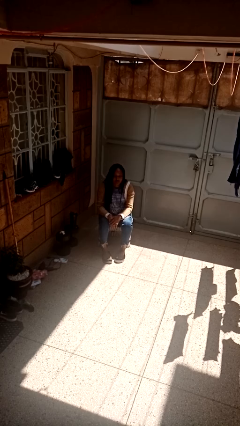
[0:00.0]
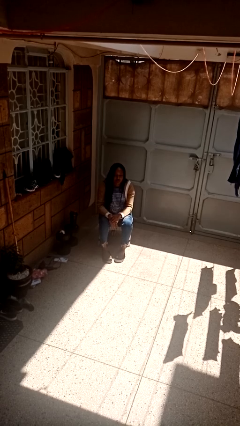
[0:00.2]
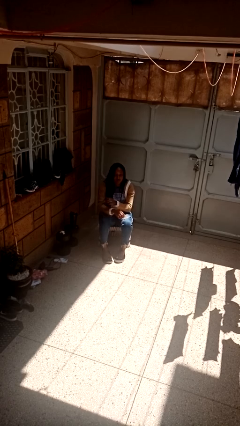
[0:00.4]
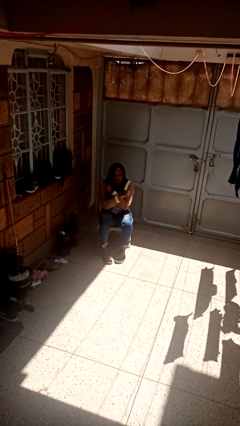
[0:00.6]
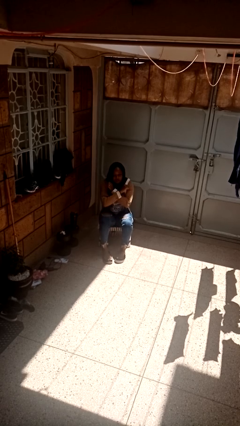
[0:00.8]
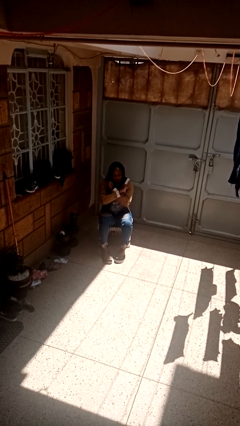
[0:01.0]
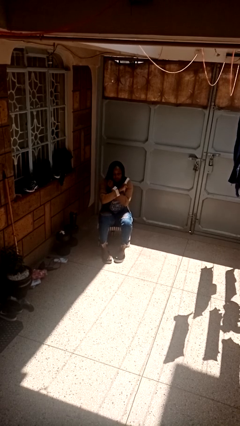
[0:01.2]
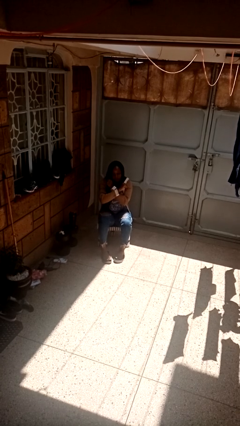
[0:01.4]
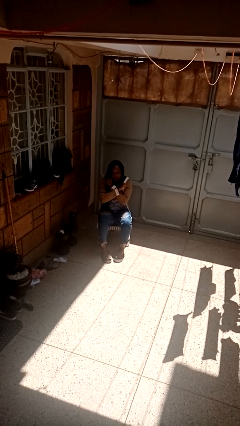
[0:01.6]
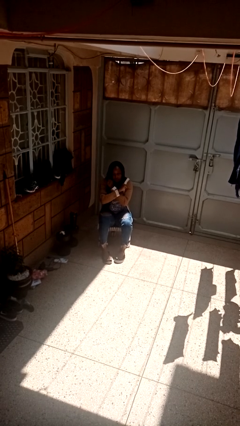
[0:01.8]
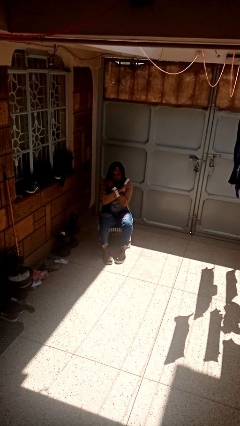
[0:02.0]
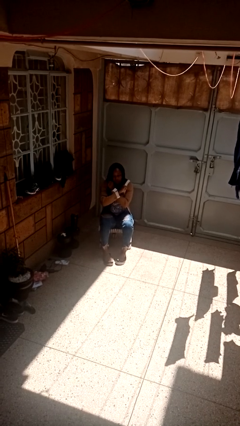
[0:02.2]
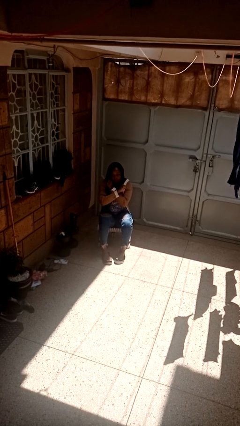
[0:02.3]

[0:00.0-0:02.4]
person gestures arms x

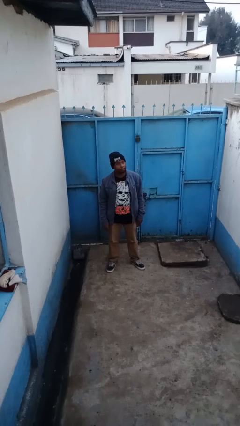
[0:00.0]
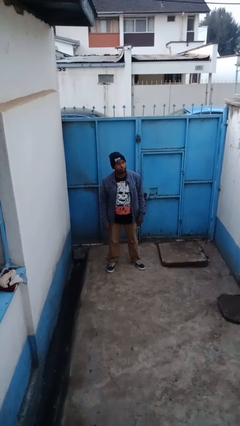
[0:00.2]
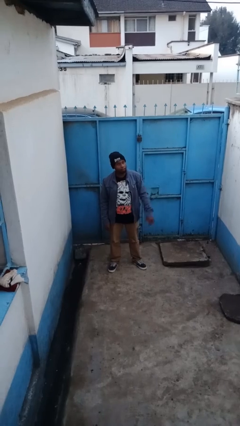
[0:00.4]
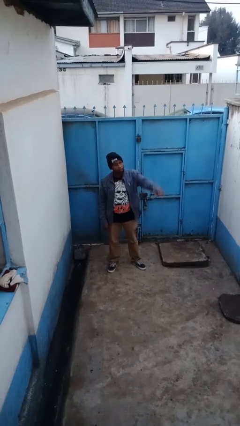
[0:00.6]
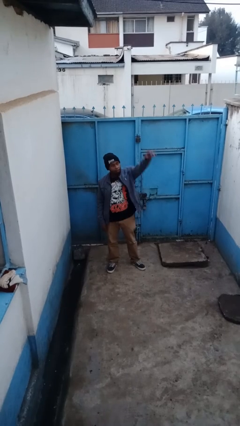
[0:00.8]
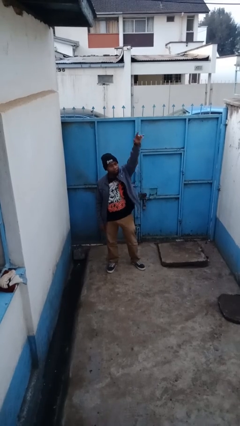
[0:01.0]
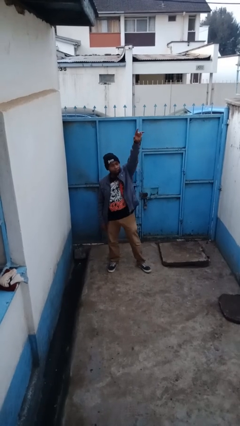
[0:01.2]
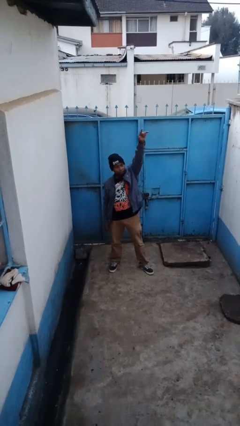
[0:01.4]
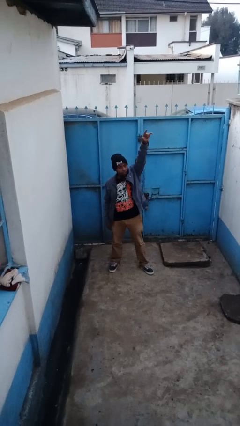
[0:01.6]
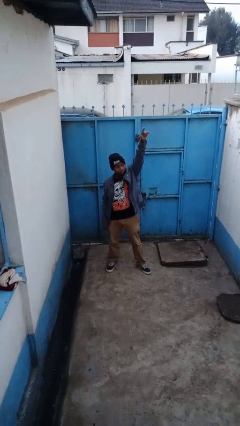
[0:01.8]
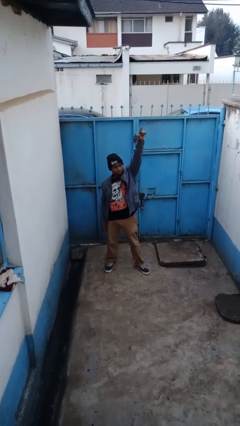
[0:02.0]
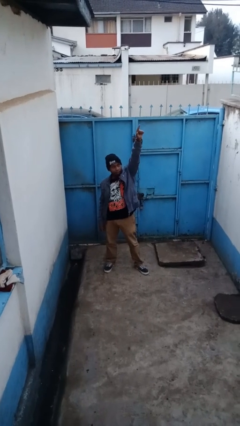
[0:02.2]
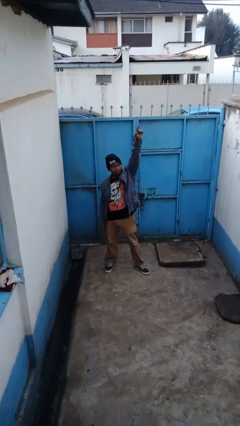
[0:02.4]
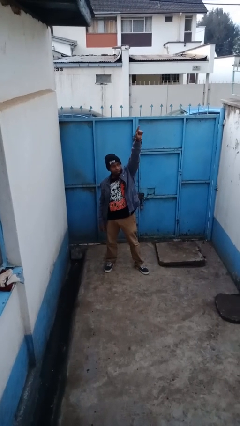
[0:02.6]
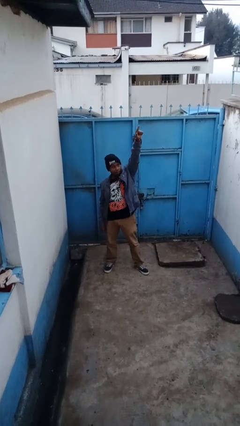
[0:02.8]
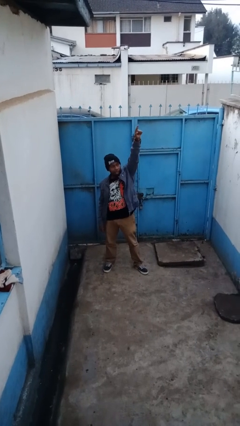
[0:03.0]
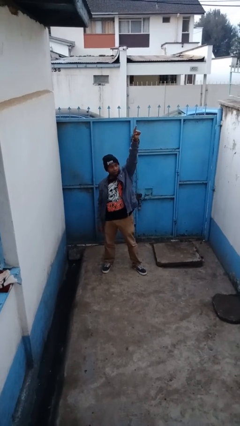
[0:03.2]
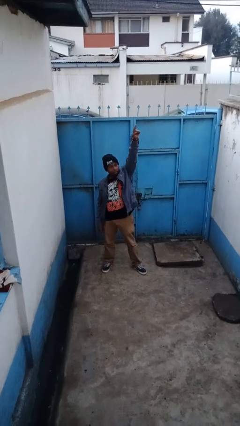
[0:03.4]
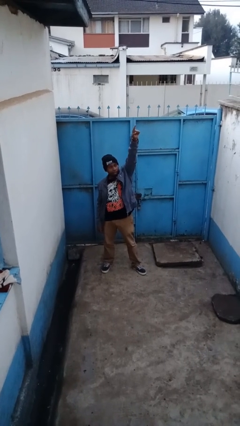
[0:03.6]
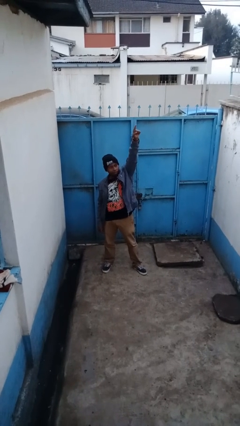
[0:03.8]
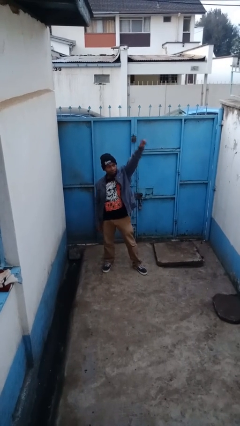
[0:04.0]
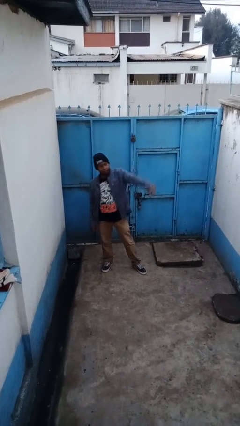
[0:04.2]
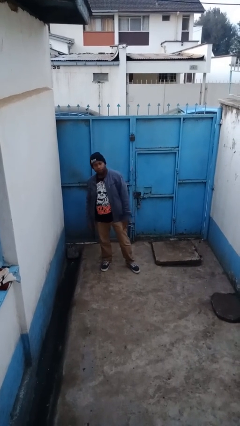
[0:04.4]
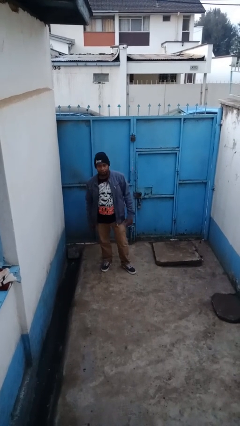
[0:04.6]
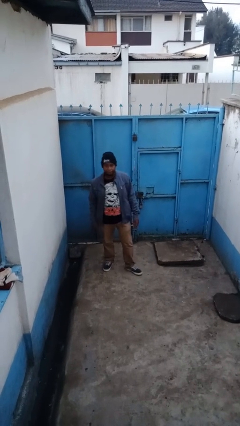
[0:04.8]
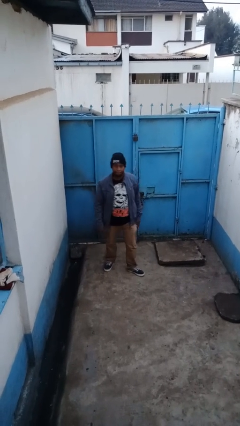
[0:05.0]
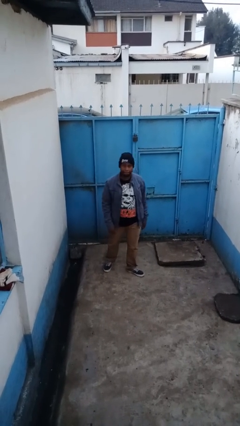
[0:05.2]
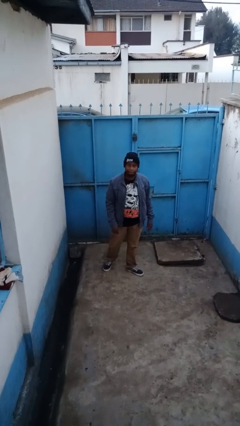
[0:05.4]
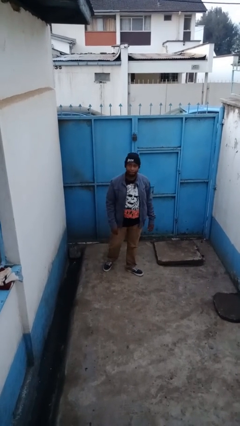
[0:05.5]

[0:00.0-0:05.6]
person points at person

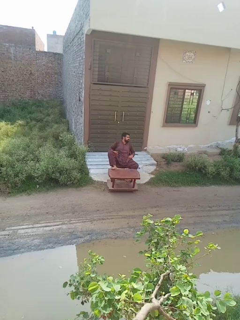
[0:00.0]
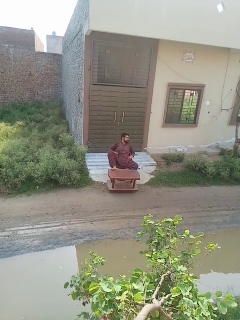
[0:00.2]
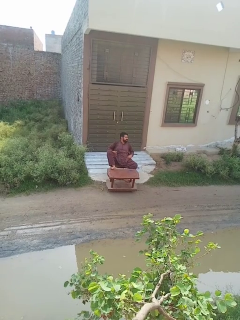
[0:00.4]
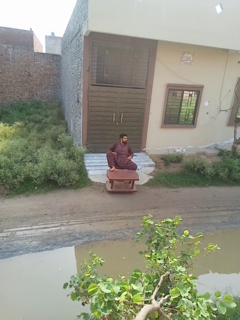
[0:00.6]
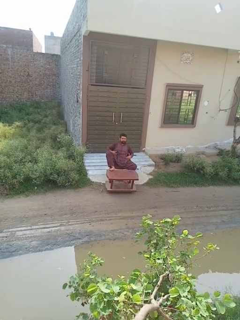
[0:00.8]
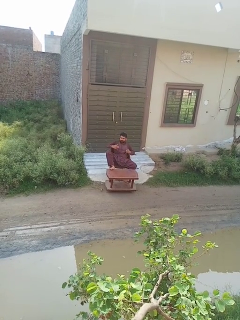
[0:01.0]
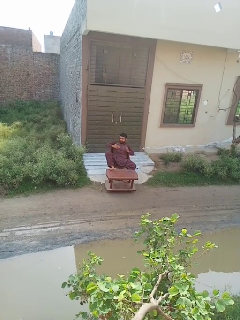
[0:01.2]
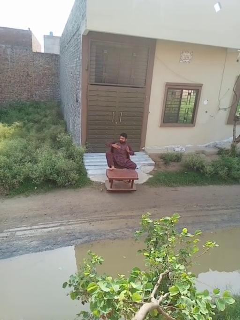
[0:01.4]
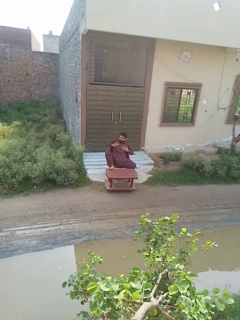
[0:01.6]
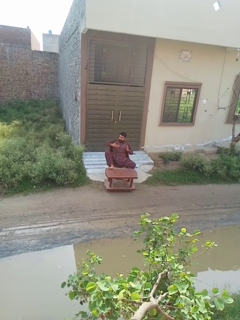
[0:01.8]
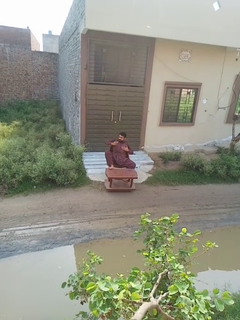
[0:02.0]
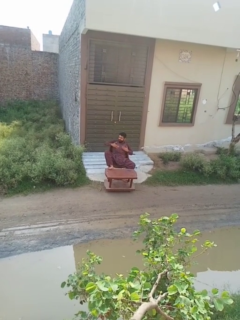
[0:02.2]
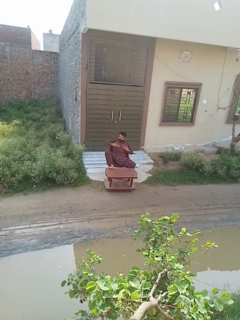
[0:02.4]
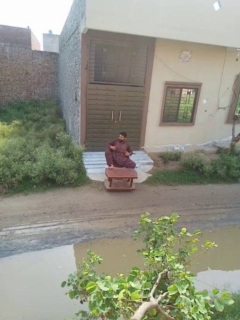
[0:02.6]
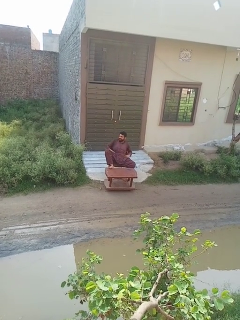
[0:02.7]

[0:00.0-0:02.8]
person drums on chest

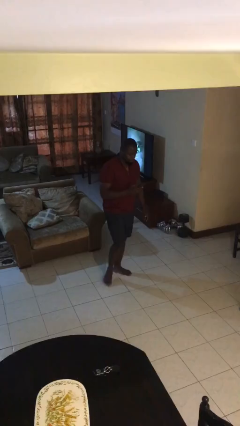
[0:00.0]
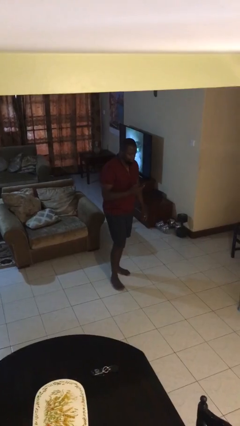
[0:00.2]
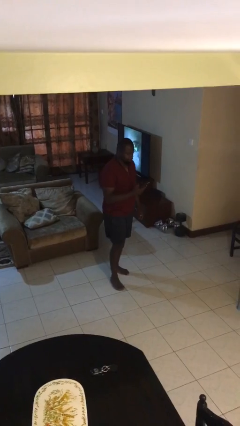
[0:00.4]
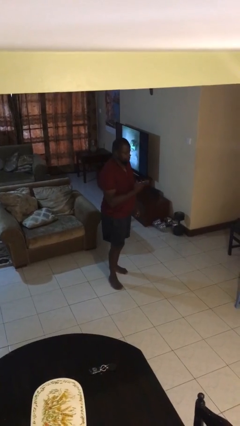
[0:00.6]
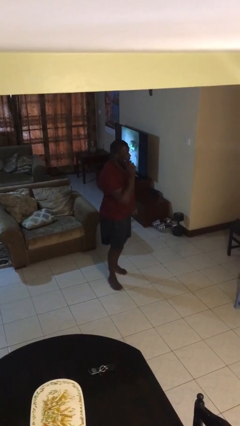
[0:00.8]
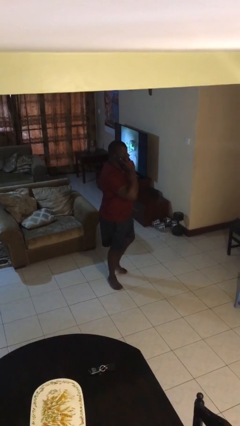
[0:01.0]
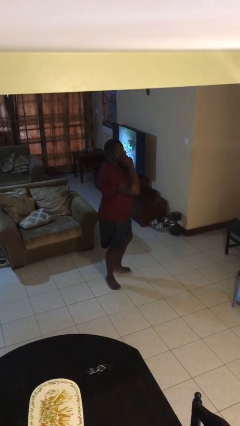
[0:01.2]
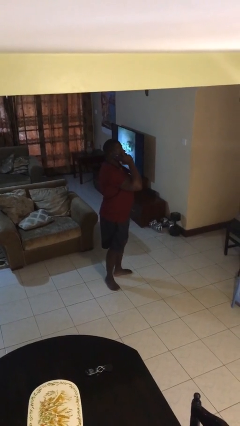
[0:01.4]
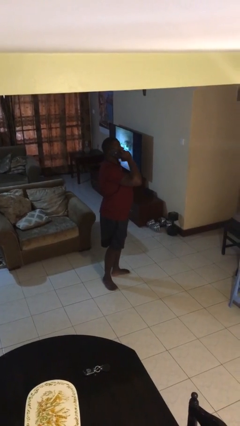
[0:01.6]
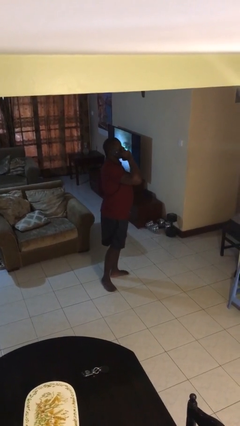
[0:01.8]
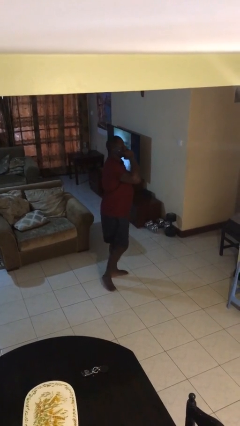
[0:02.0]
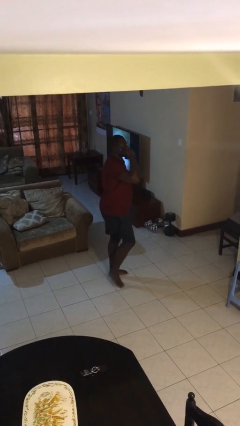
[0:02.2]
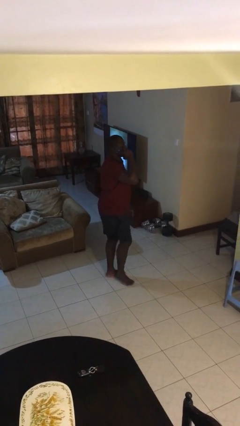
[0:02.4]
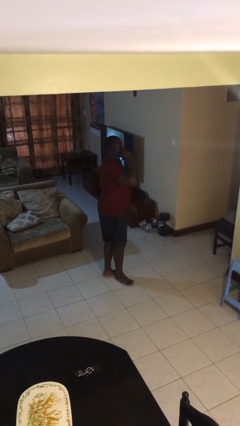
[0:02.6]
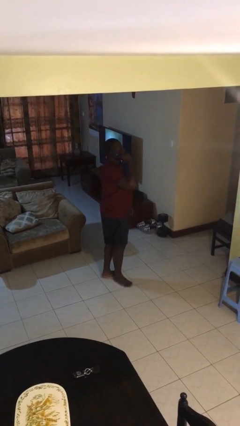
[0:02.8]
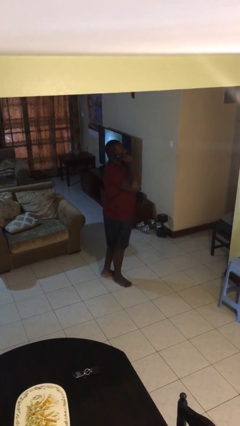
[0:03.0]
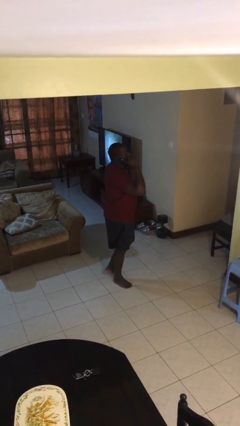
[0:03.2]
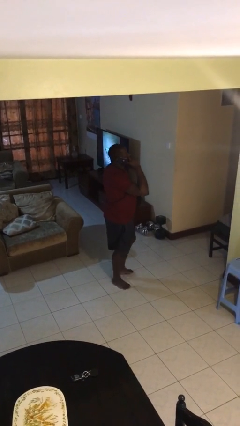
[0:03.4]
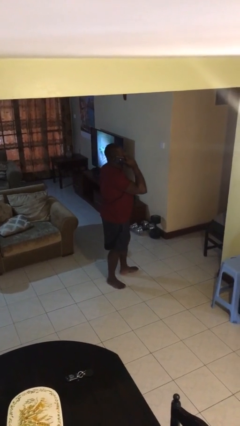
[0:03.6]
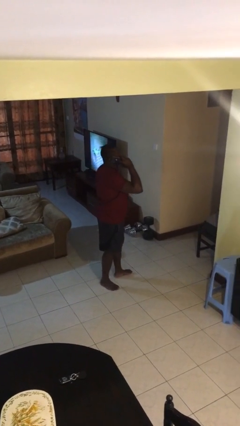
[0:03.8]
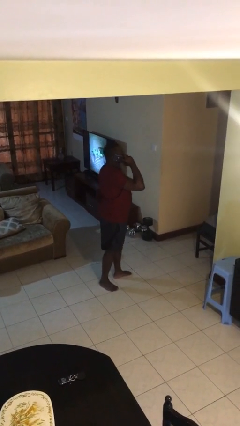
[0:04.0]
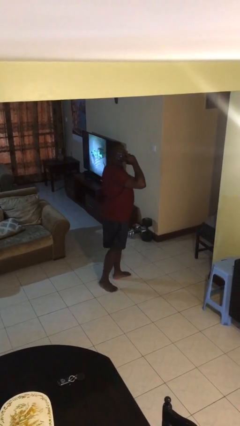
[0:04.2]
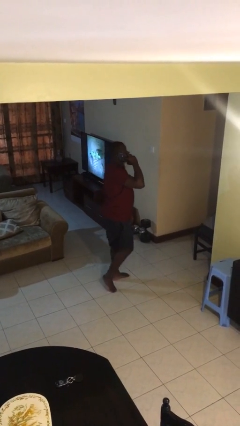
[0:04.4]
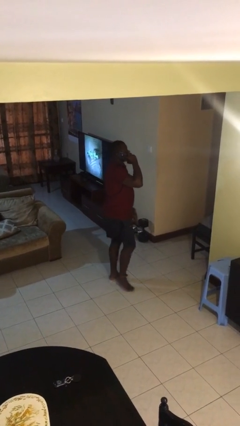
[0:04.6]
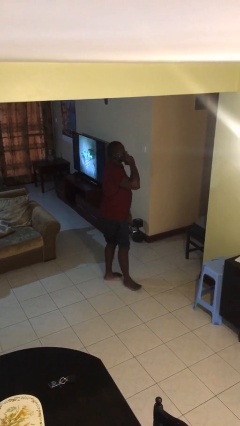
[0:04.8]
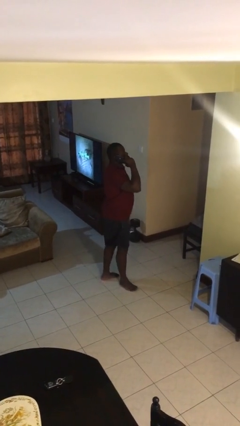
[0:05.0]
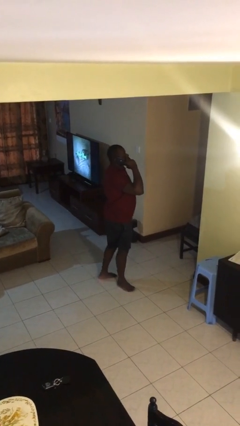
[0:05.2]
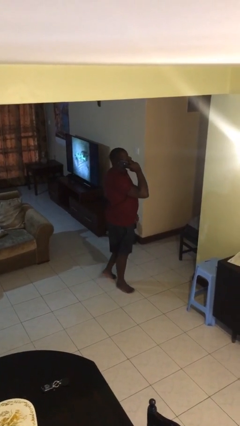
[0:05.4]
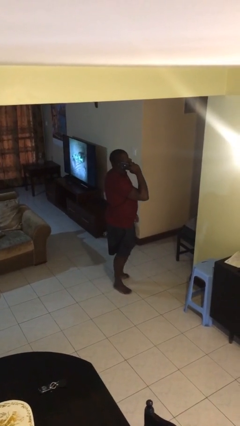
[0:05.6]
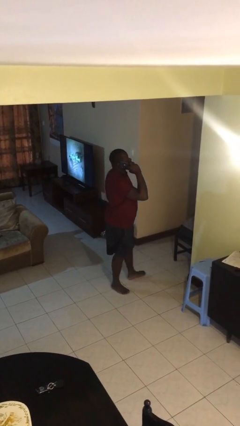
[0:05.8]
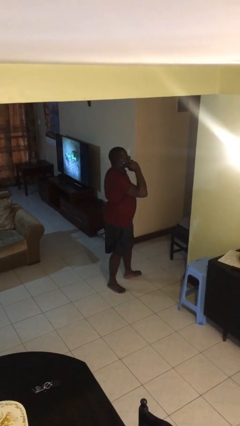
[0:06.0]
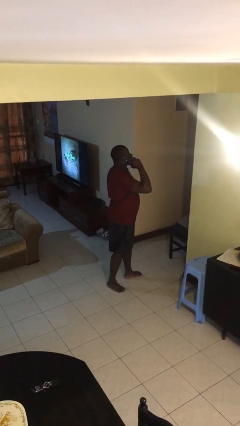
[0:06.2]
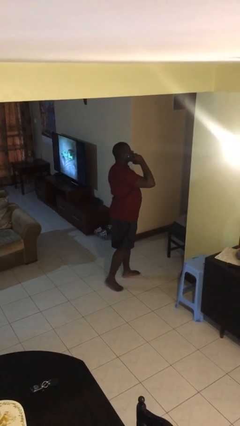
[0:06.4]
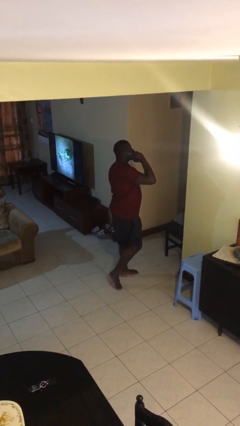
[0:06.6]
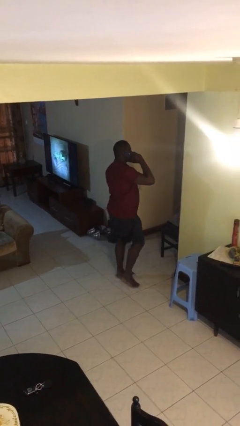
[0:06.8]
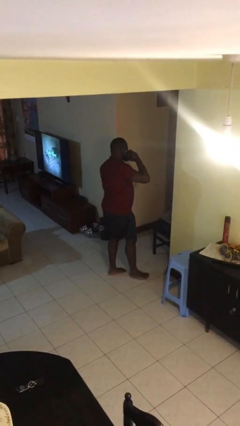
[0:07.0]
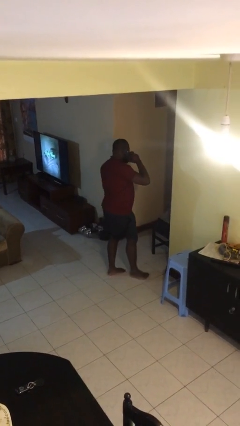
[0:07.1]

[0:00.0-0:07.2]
person talks on phone

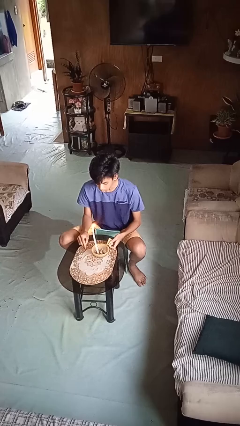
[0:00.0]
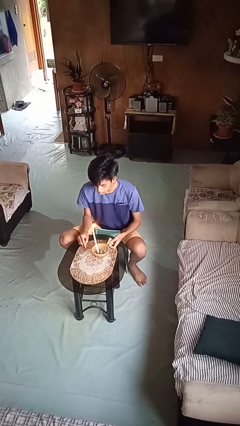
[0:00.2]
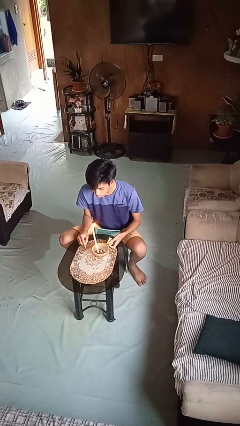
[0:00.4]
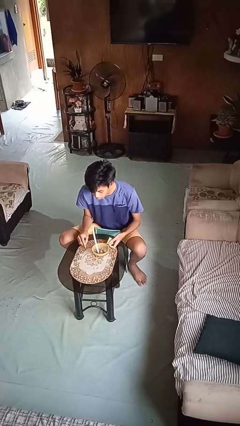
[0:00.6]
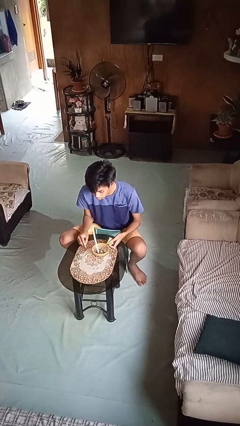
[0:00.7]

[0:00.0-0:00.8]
person extinguishes candle
